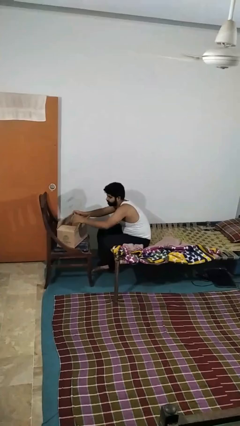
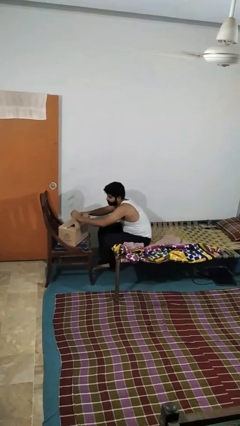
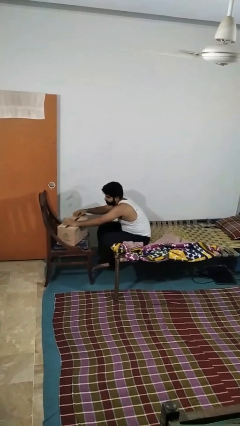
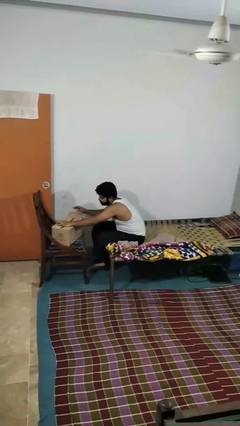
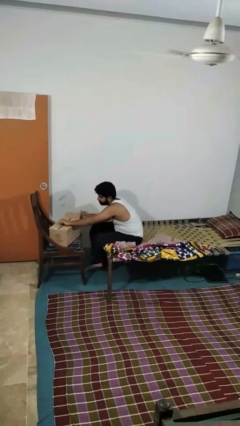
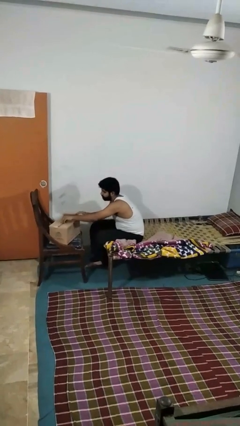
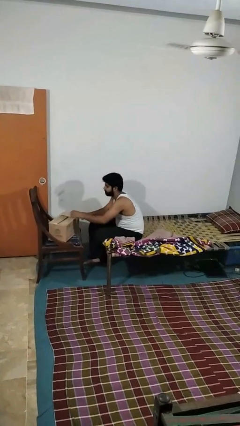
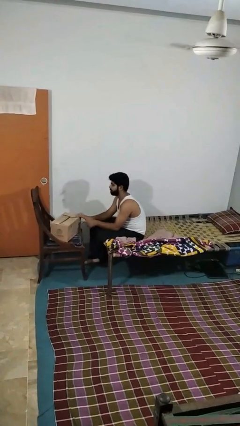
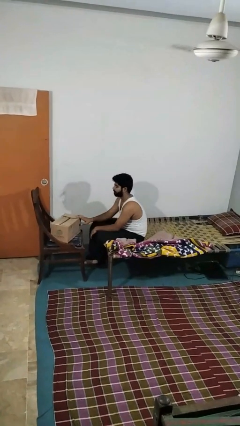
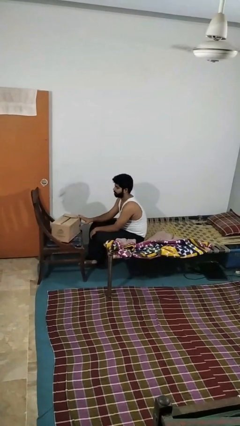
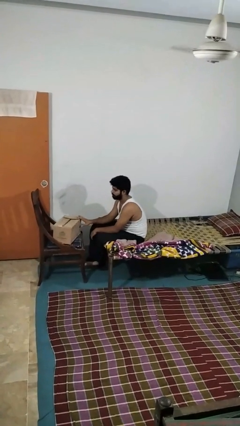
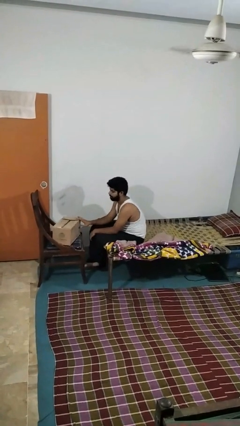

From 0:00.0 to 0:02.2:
person closes box

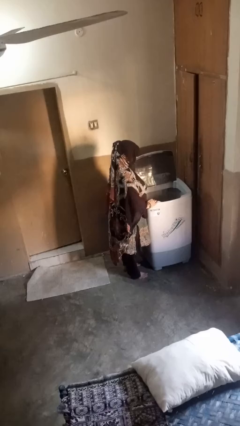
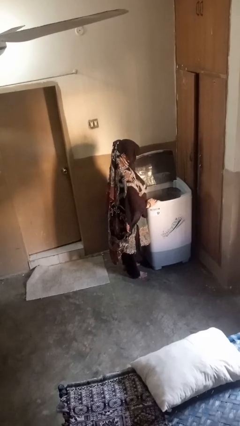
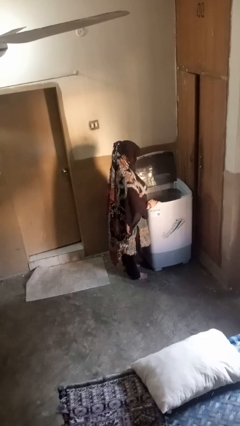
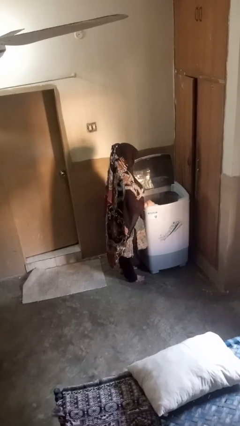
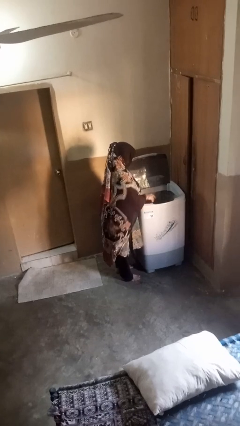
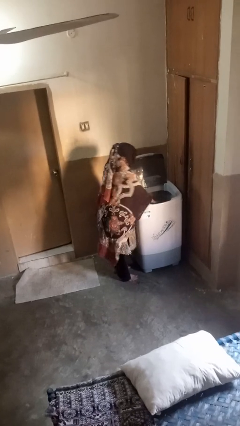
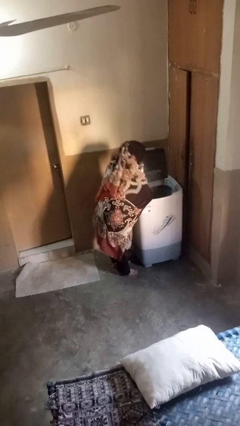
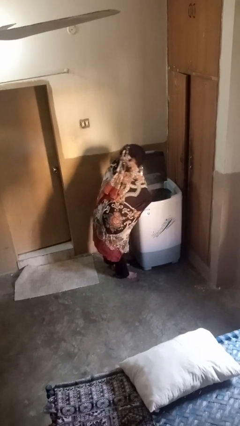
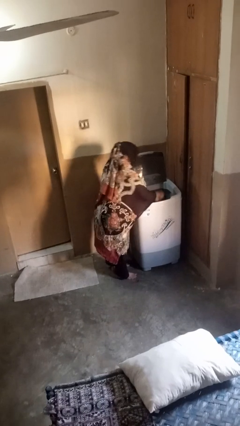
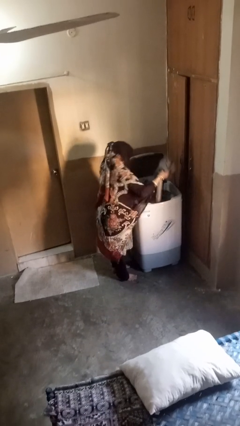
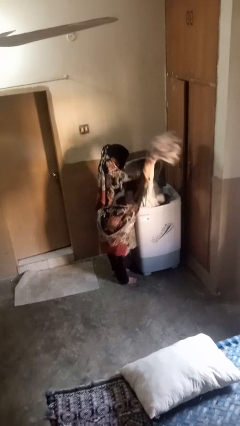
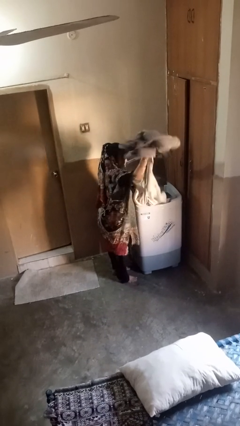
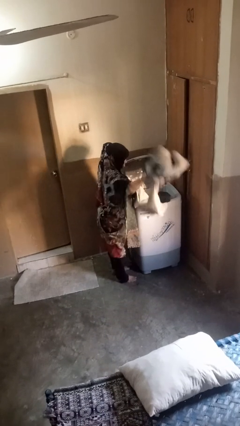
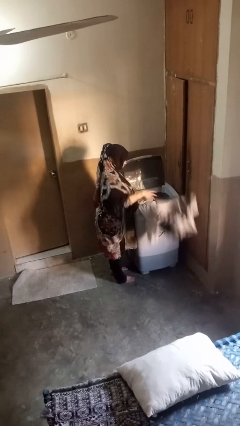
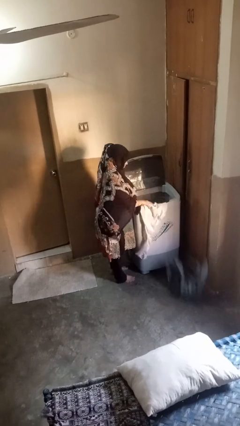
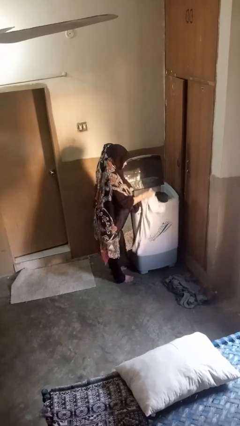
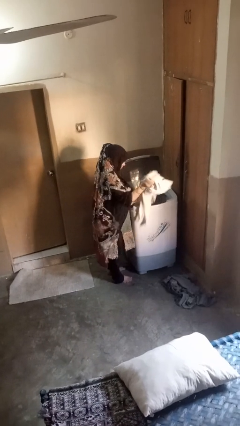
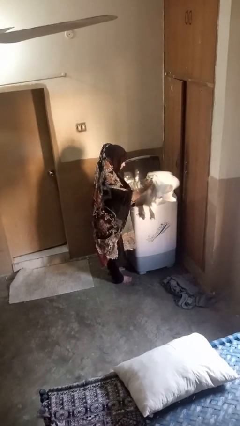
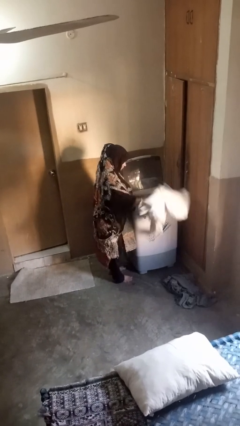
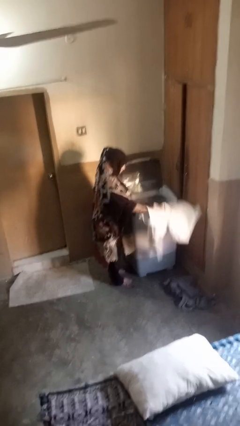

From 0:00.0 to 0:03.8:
person unloads clotheswasher

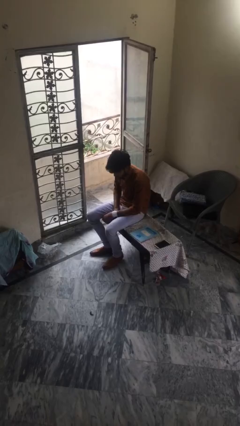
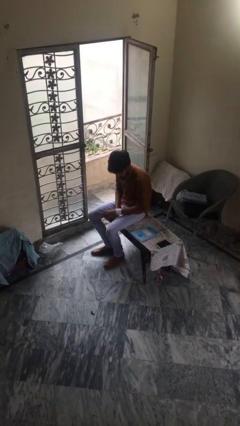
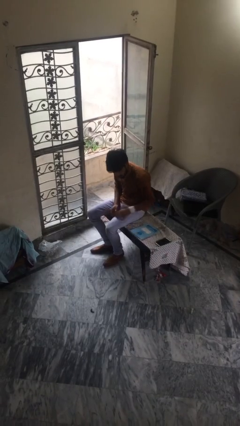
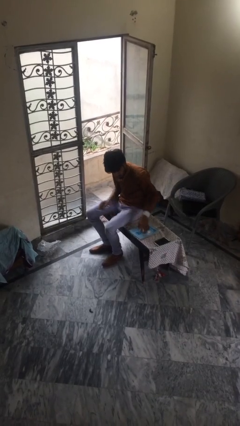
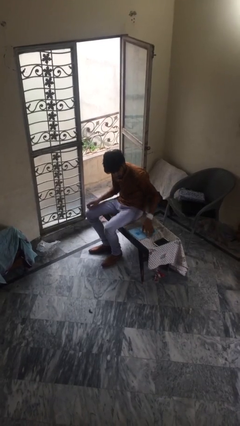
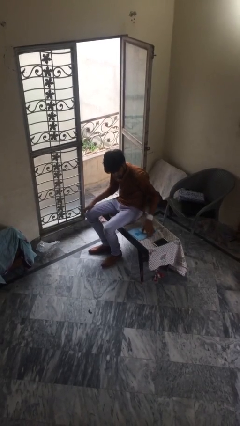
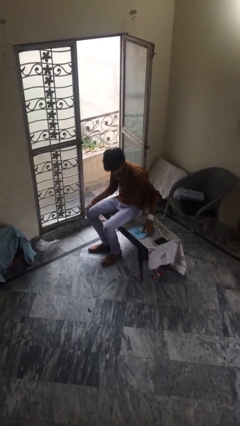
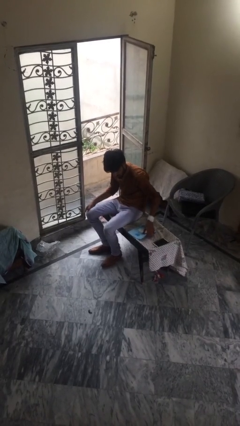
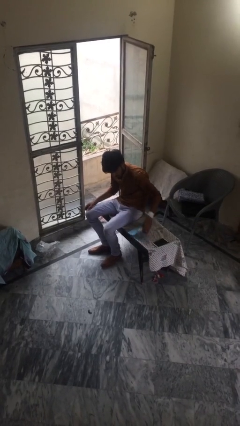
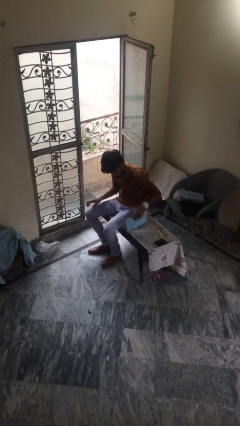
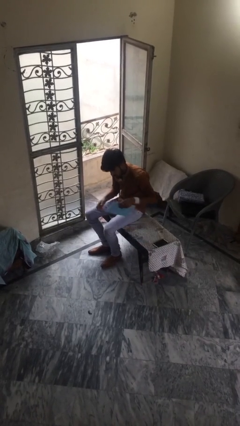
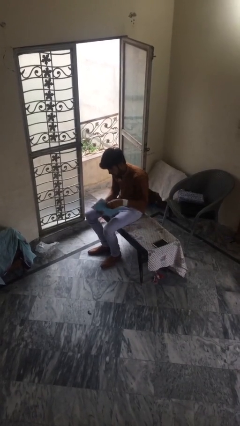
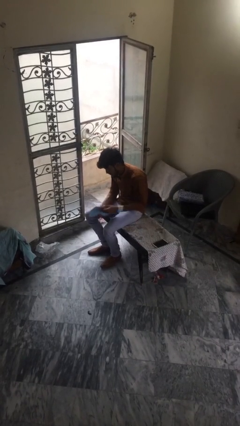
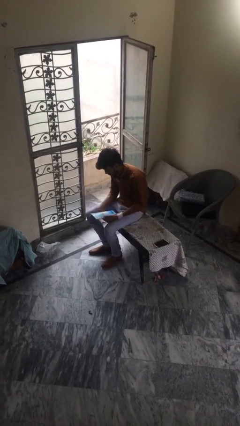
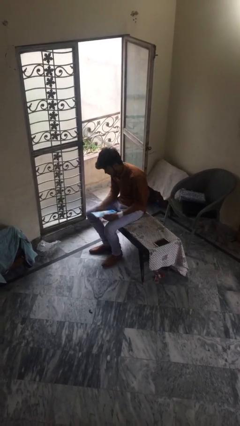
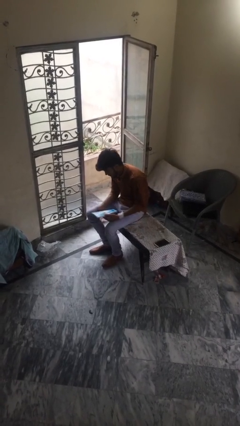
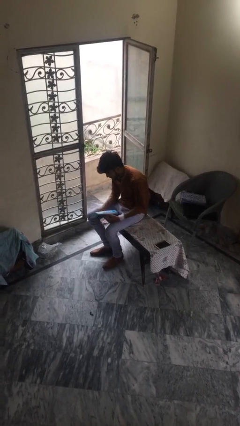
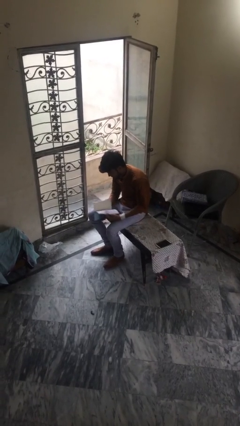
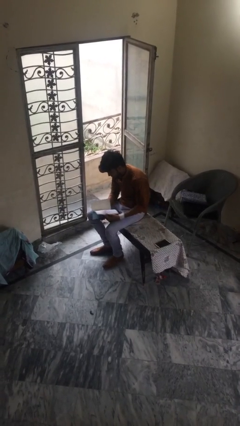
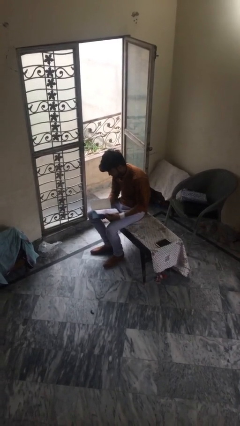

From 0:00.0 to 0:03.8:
person picks up object from table

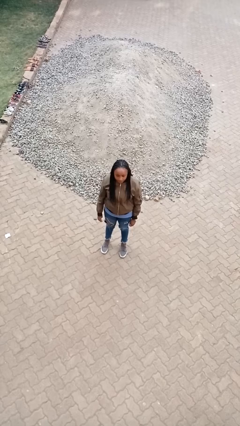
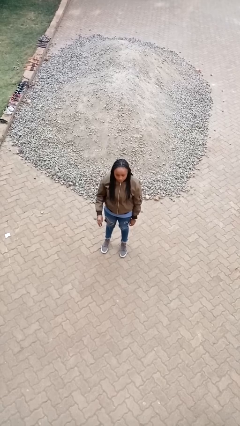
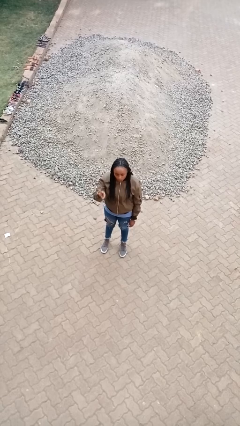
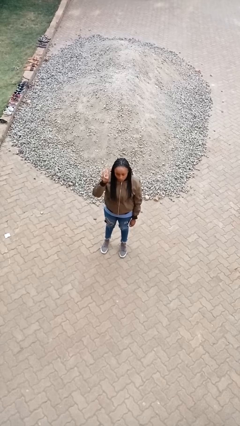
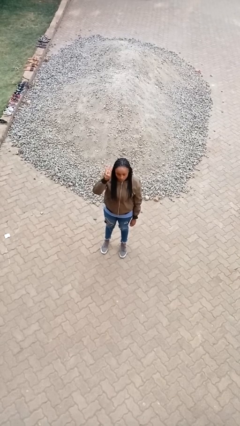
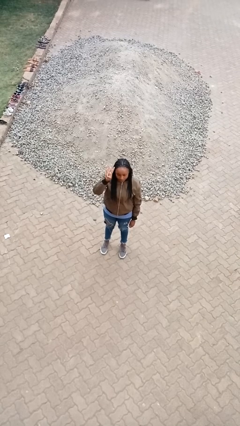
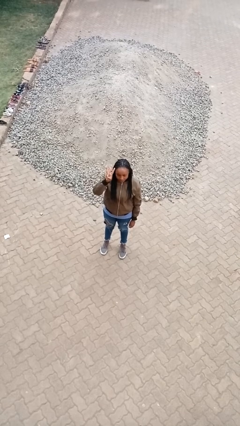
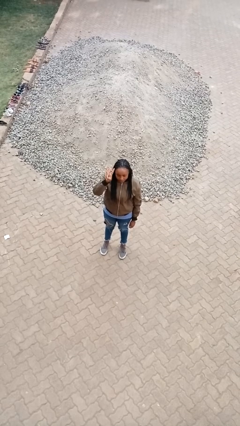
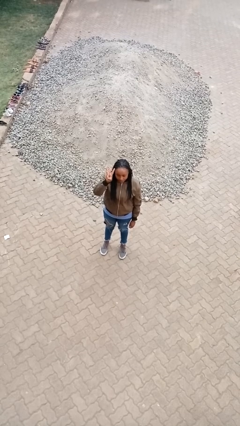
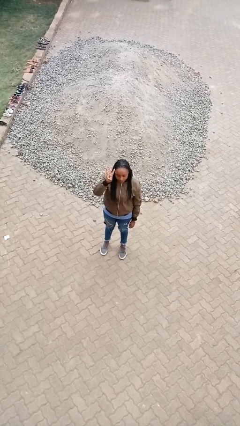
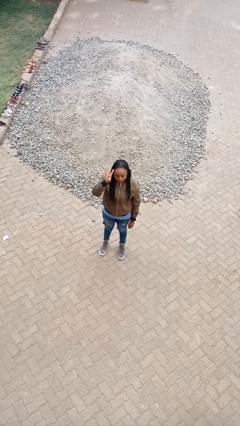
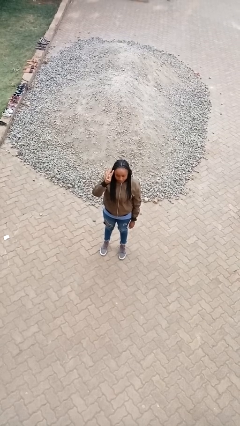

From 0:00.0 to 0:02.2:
person gestures number three

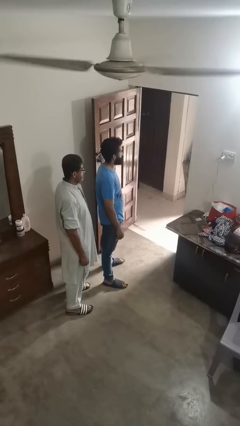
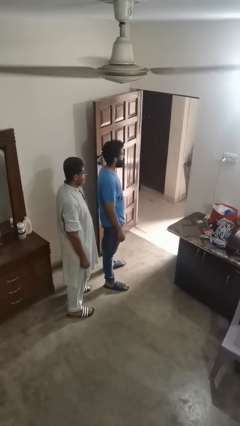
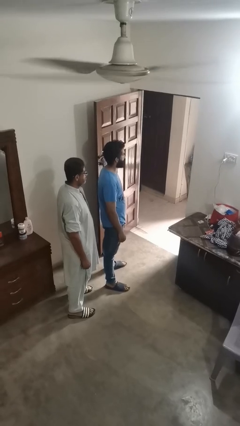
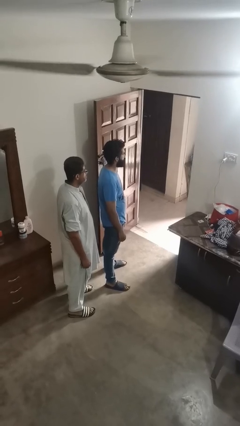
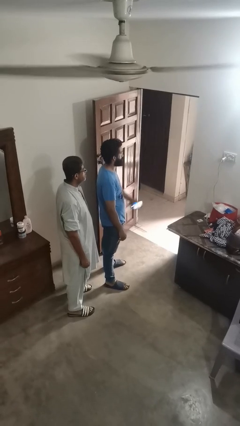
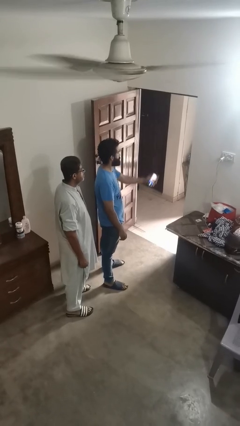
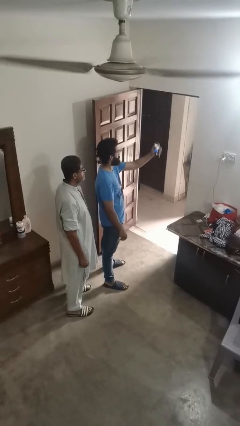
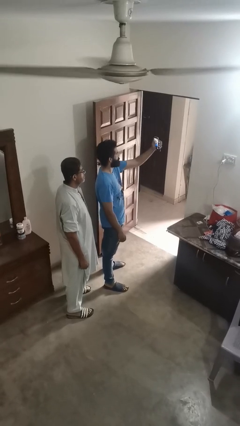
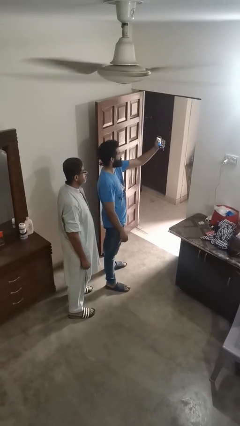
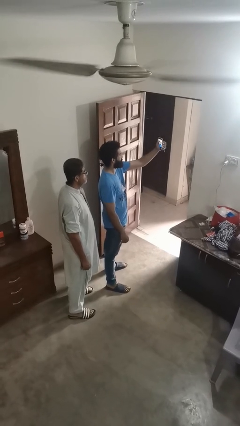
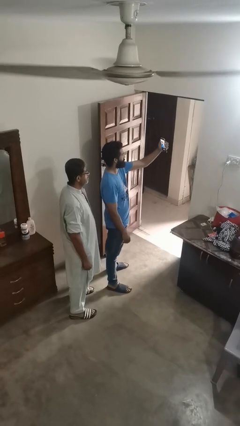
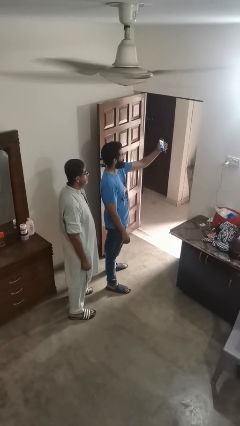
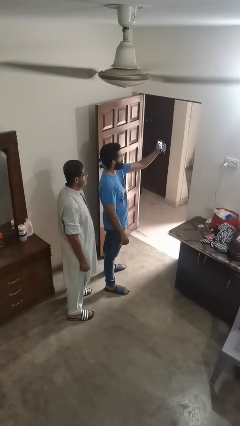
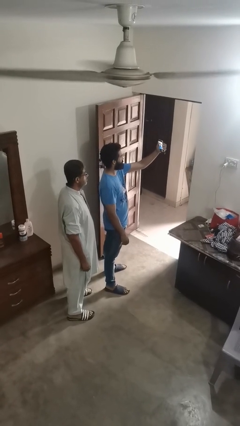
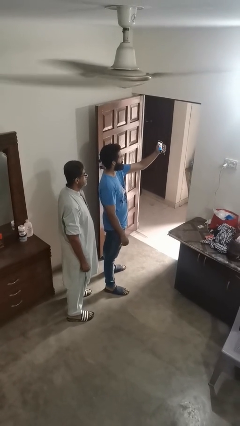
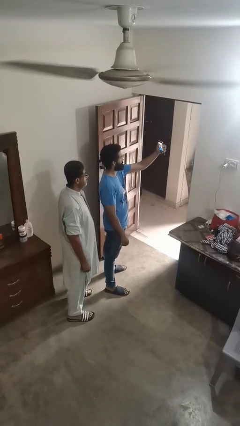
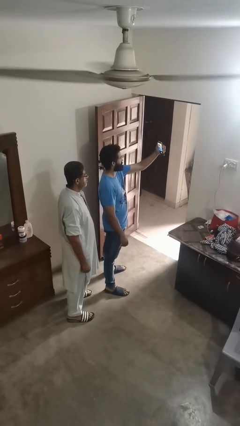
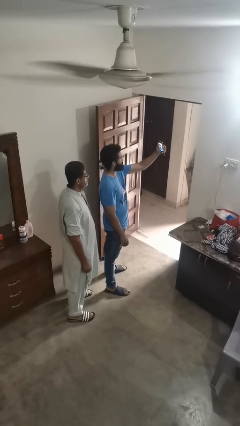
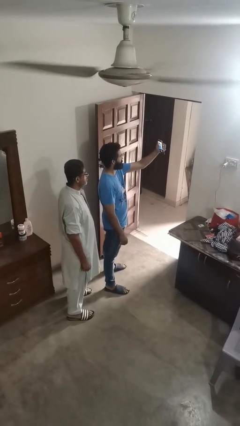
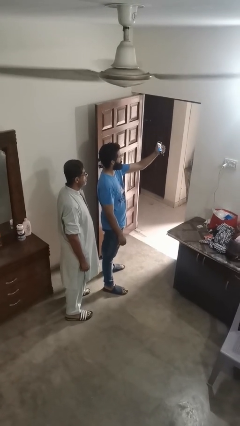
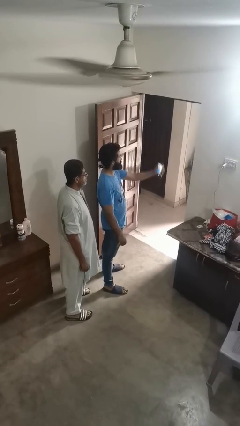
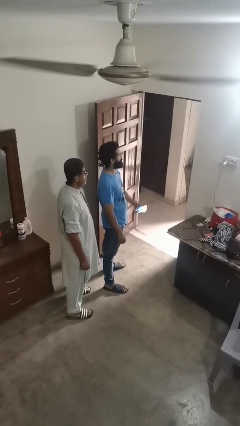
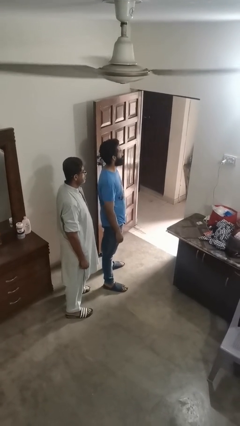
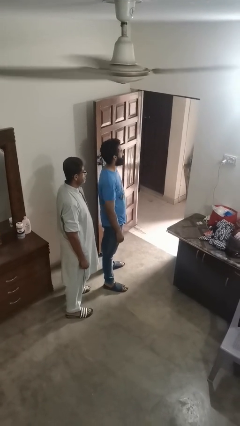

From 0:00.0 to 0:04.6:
person takes selfie with person

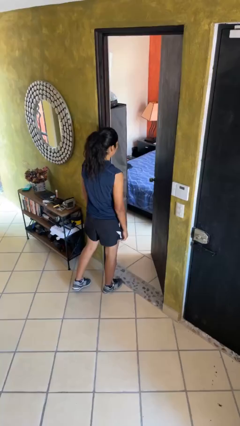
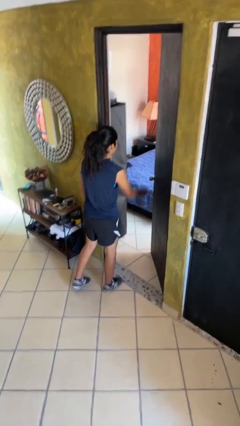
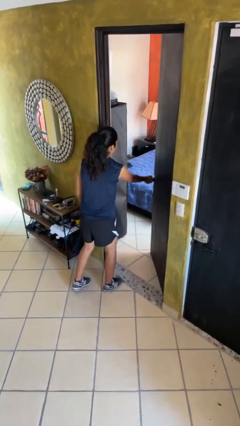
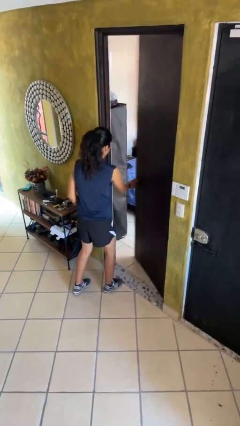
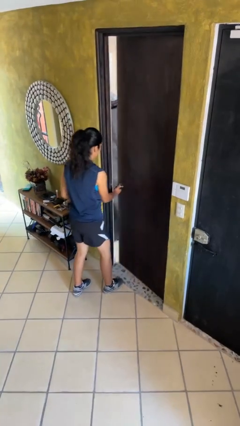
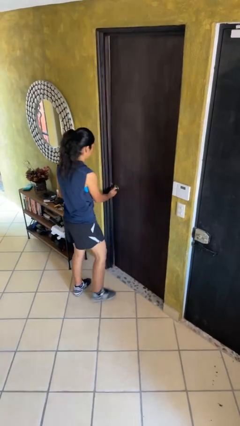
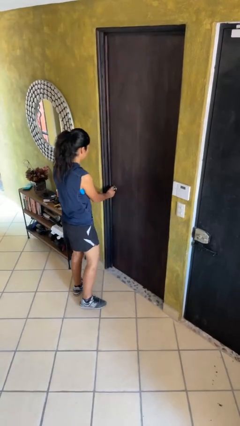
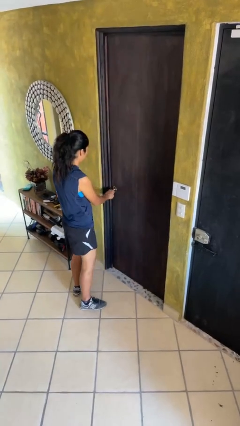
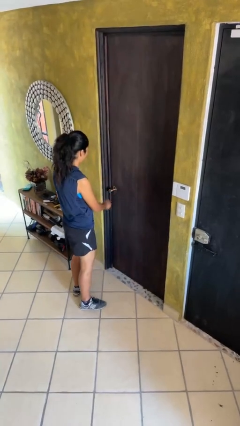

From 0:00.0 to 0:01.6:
person closes facility door
